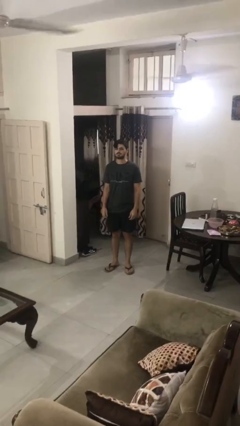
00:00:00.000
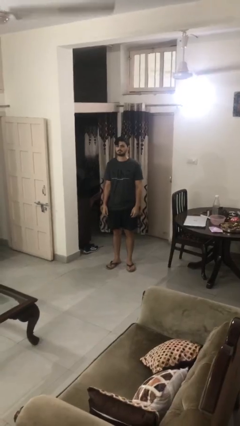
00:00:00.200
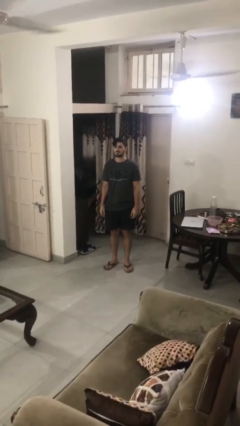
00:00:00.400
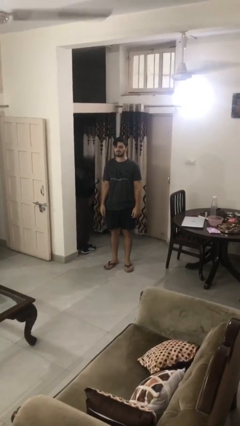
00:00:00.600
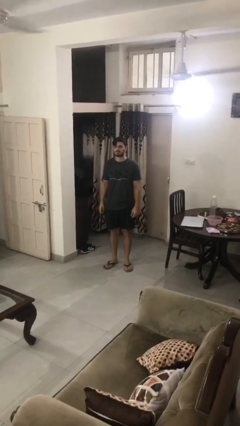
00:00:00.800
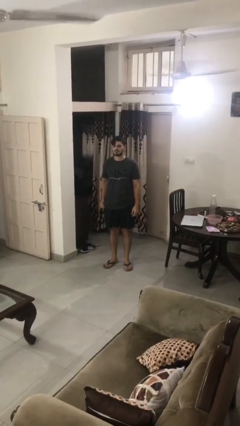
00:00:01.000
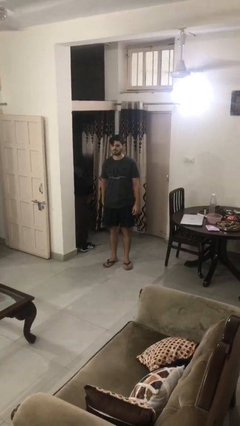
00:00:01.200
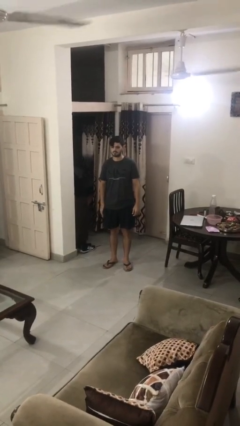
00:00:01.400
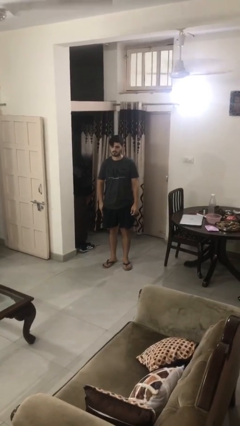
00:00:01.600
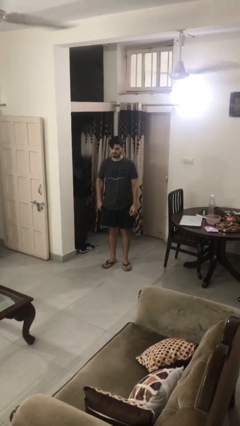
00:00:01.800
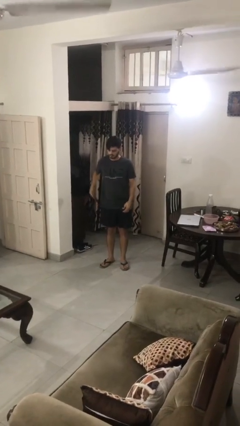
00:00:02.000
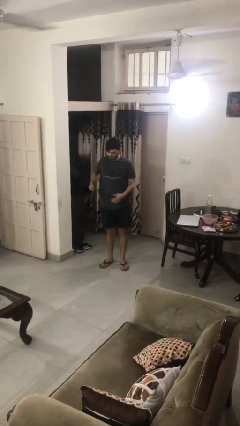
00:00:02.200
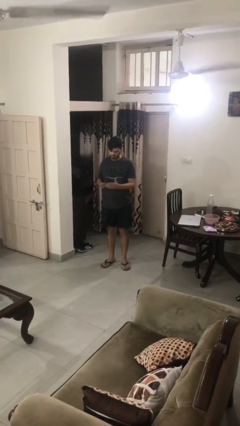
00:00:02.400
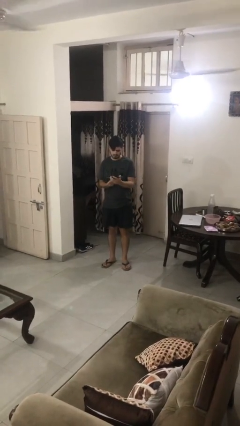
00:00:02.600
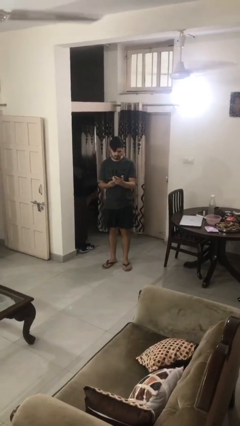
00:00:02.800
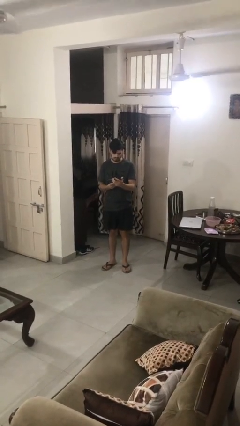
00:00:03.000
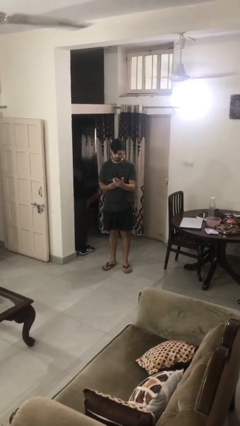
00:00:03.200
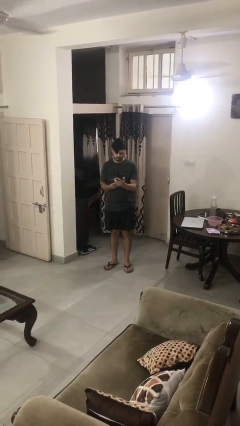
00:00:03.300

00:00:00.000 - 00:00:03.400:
person takes phone from pocket

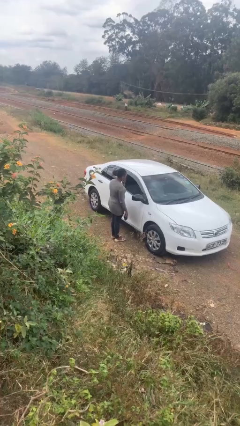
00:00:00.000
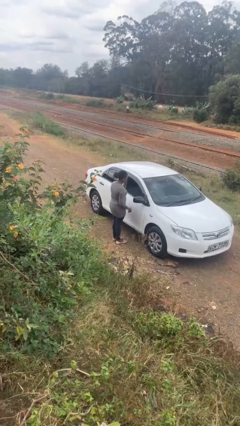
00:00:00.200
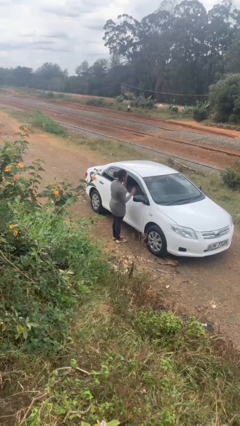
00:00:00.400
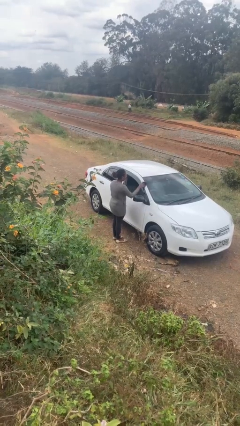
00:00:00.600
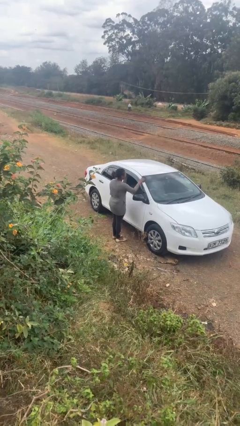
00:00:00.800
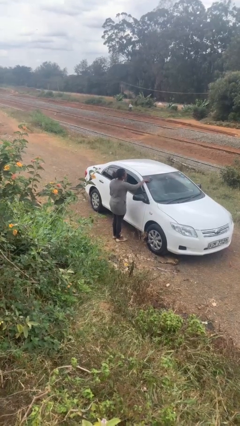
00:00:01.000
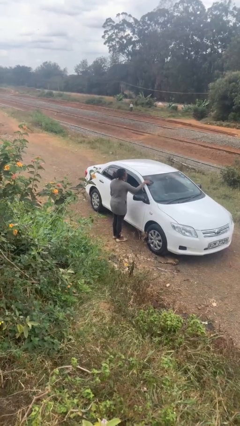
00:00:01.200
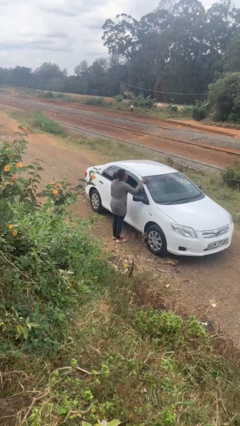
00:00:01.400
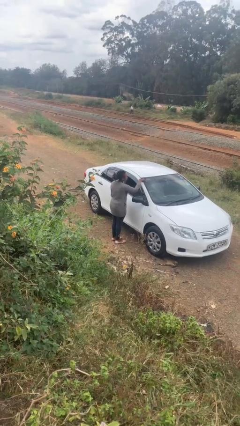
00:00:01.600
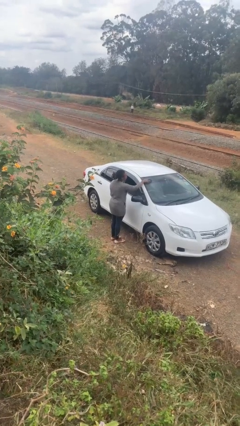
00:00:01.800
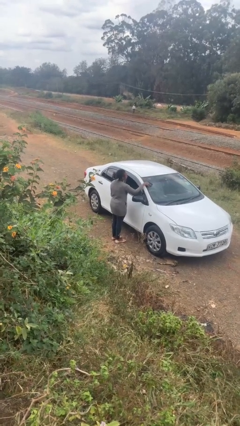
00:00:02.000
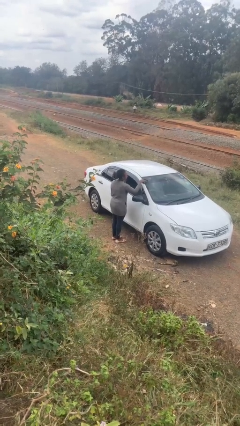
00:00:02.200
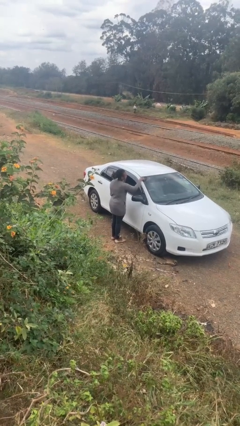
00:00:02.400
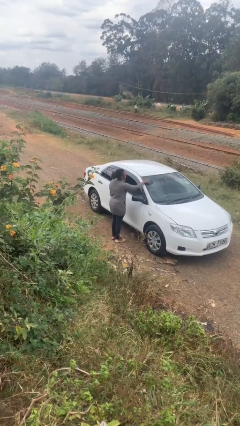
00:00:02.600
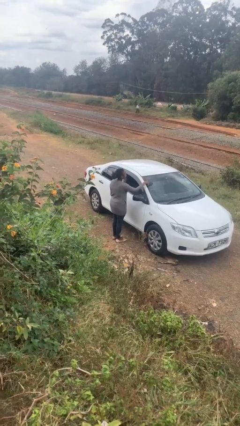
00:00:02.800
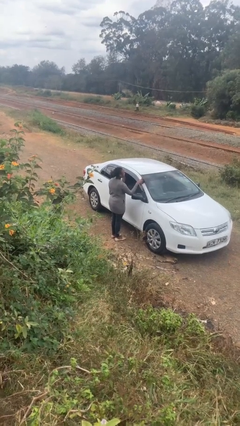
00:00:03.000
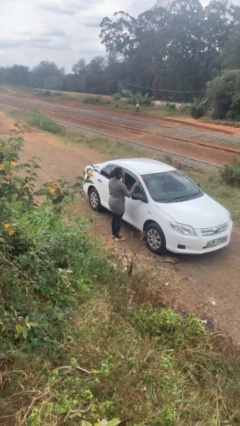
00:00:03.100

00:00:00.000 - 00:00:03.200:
person polishes car with rag

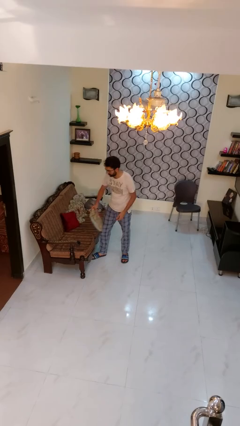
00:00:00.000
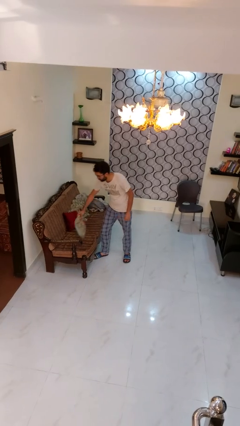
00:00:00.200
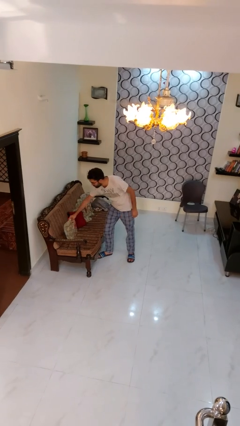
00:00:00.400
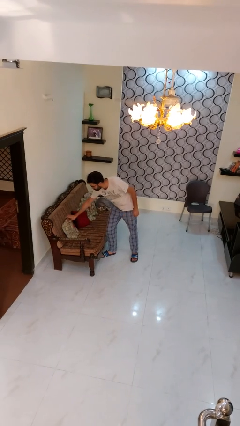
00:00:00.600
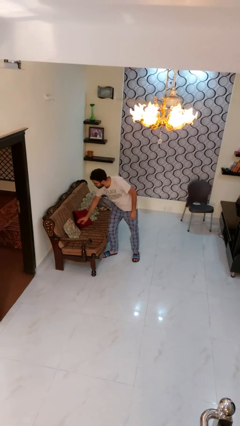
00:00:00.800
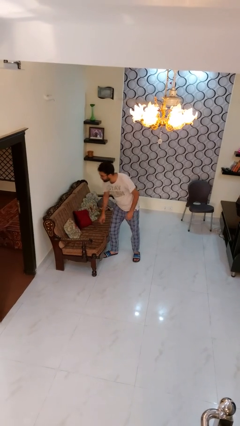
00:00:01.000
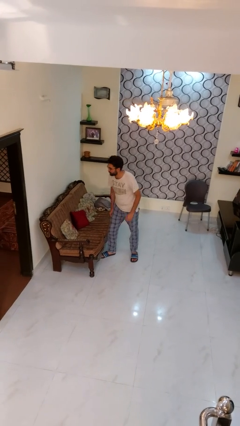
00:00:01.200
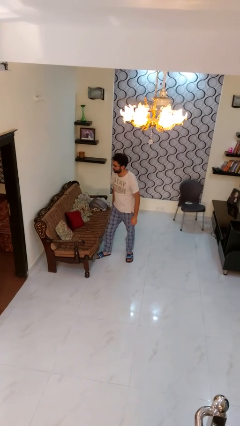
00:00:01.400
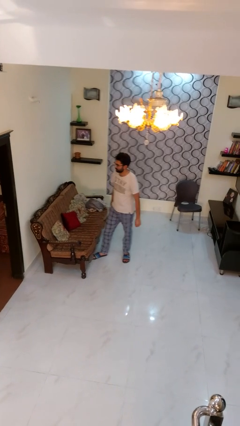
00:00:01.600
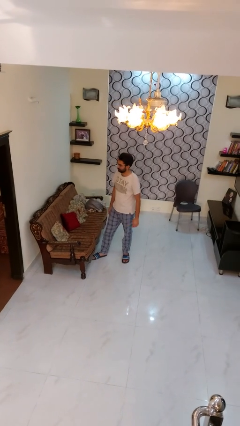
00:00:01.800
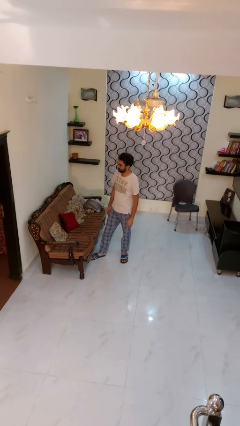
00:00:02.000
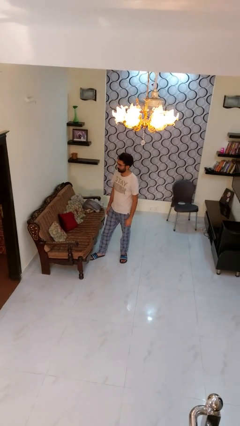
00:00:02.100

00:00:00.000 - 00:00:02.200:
person puts down object on couch

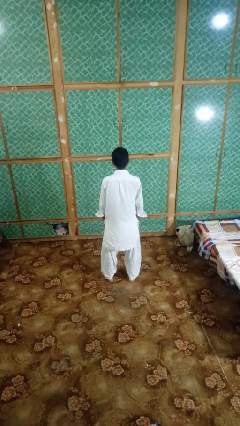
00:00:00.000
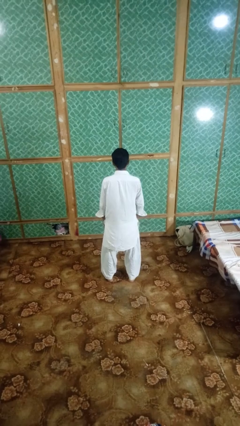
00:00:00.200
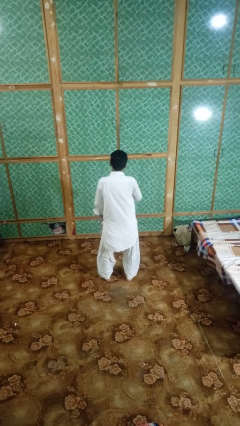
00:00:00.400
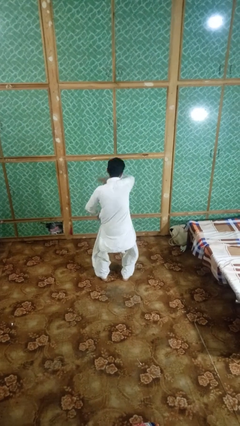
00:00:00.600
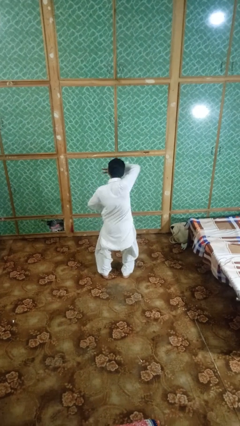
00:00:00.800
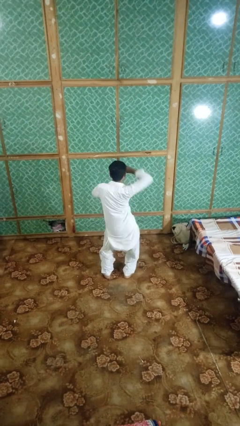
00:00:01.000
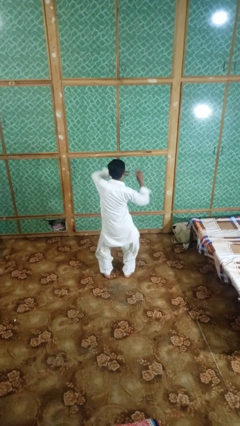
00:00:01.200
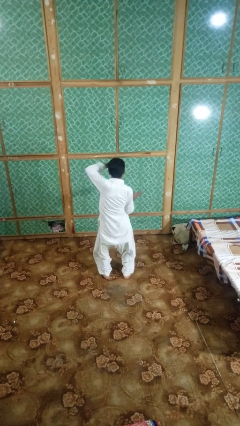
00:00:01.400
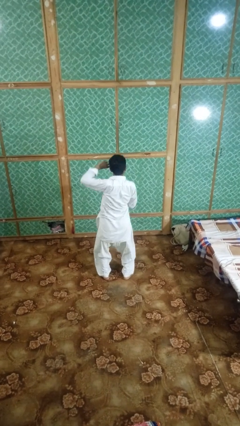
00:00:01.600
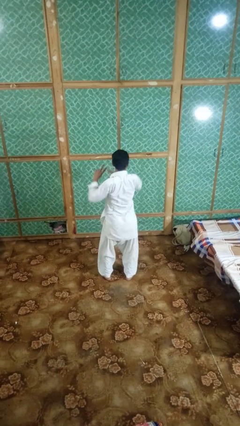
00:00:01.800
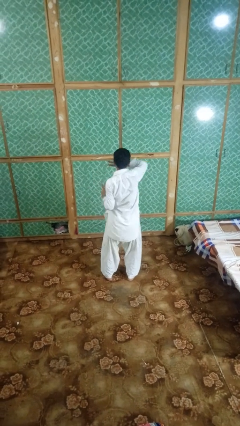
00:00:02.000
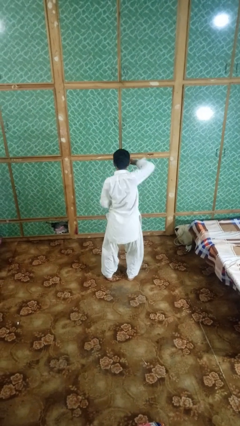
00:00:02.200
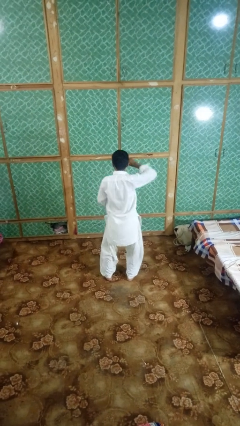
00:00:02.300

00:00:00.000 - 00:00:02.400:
person dances in place

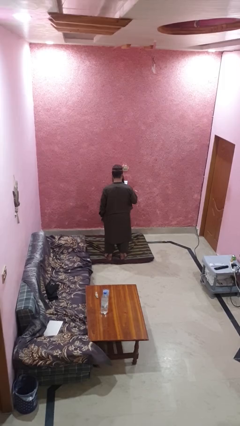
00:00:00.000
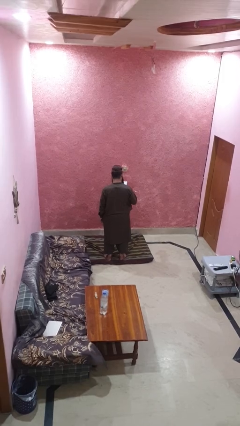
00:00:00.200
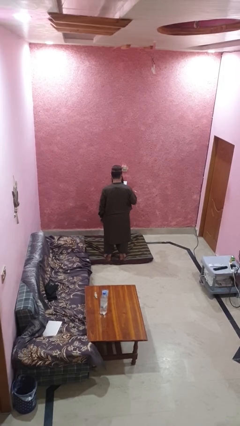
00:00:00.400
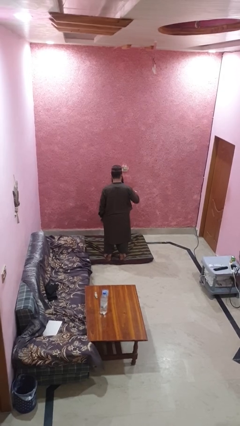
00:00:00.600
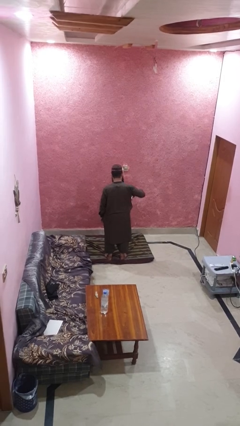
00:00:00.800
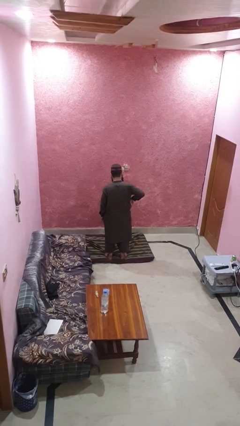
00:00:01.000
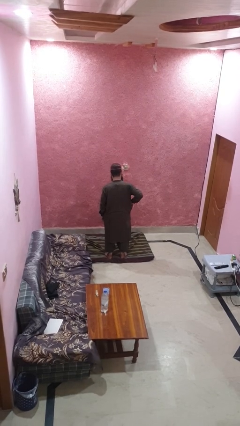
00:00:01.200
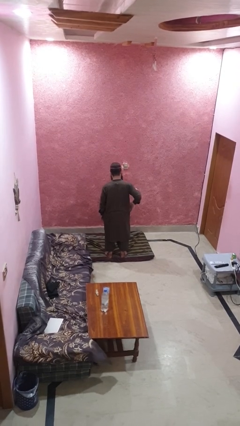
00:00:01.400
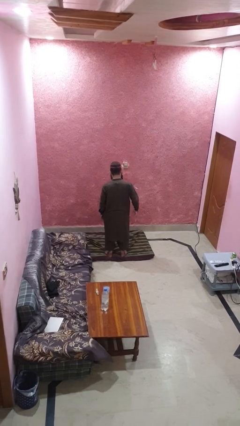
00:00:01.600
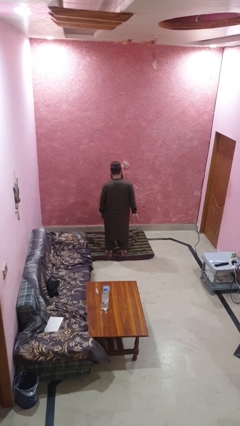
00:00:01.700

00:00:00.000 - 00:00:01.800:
person puts phone into pocket

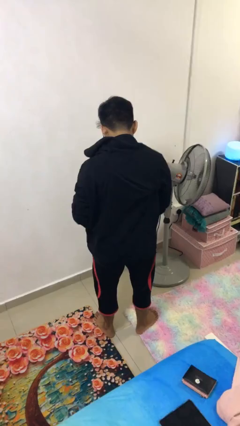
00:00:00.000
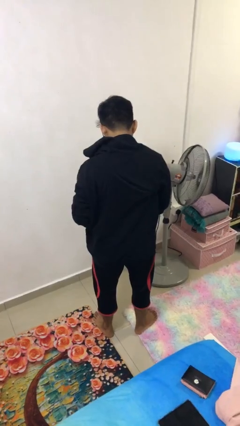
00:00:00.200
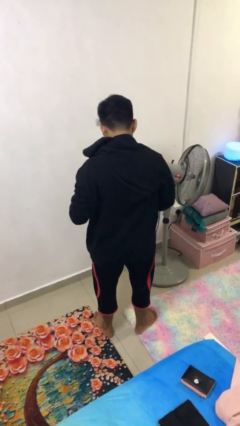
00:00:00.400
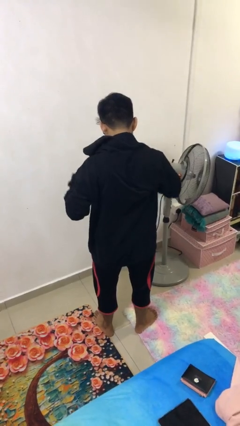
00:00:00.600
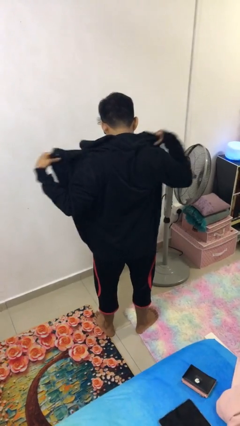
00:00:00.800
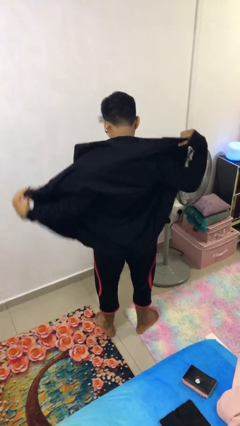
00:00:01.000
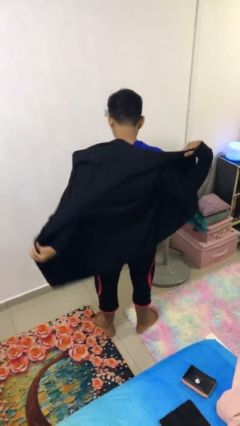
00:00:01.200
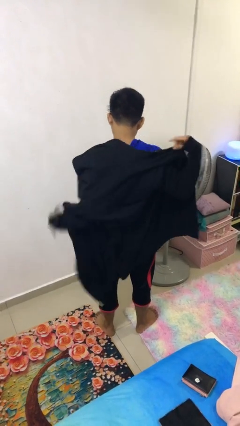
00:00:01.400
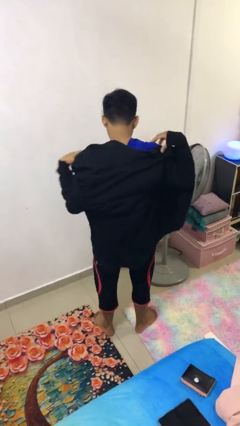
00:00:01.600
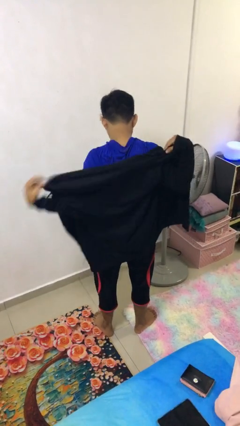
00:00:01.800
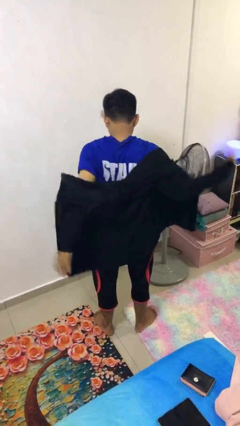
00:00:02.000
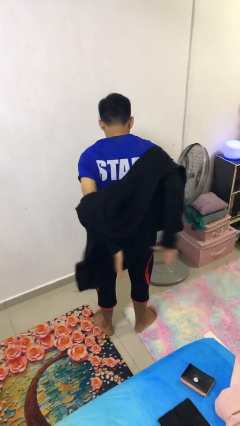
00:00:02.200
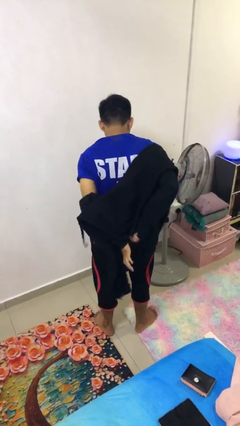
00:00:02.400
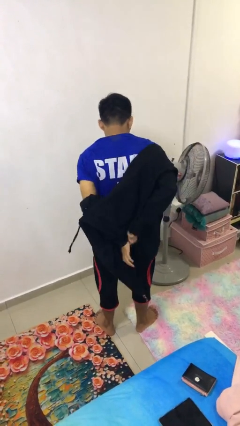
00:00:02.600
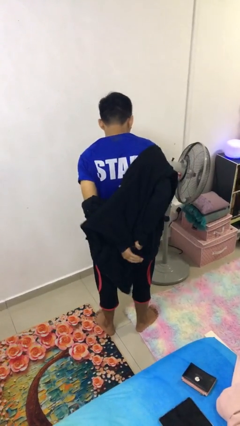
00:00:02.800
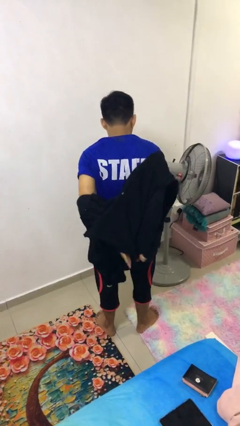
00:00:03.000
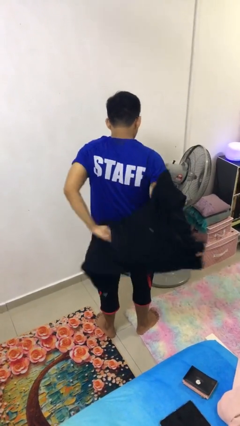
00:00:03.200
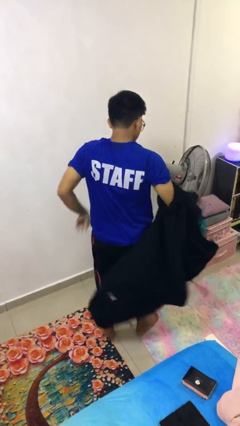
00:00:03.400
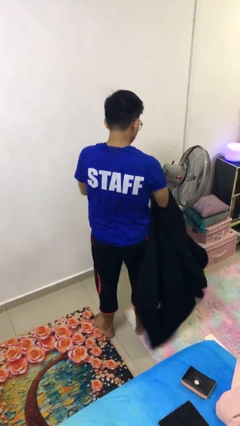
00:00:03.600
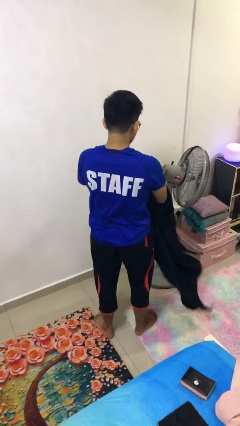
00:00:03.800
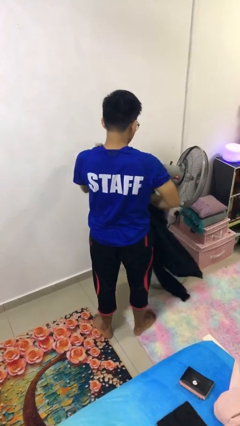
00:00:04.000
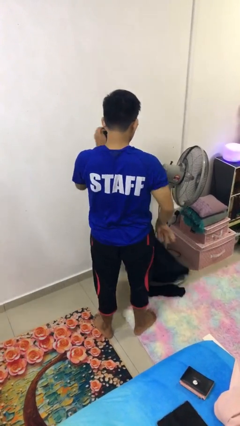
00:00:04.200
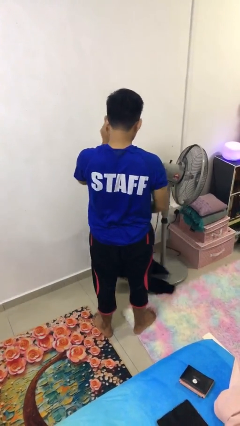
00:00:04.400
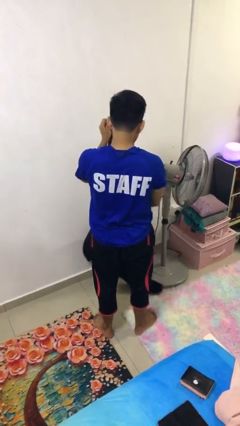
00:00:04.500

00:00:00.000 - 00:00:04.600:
person takes off jacket
